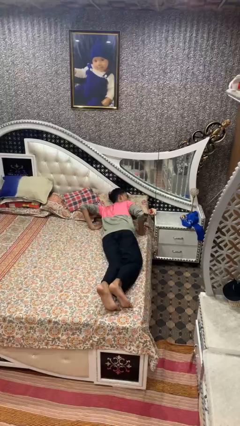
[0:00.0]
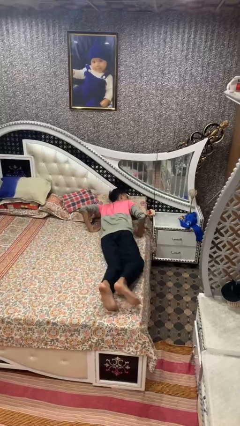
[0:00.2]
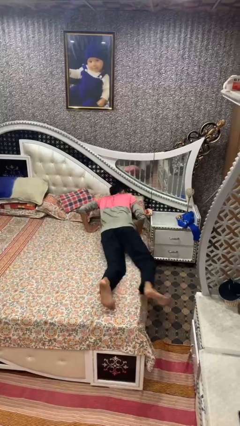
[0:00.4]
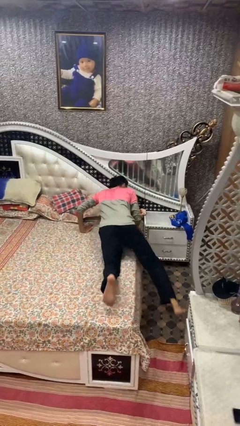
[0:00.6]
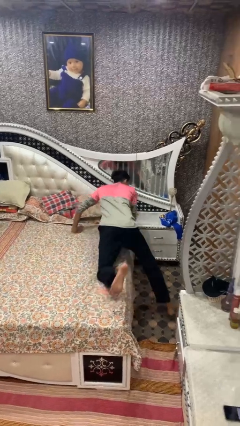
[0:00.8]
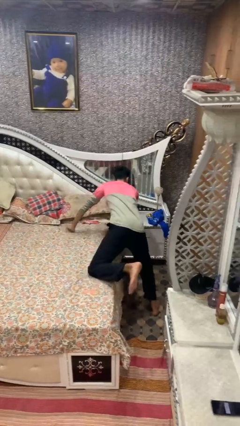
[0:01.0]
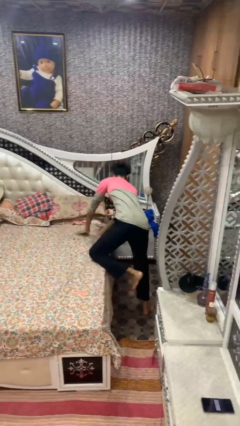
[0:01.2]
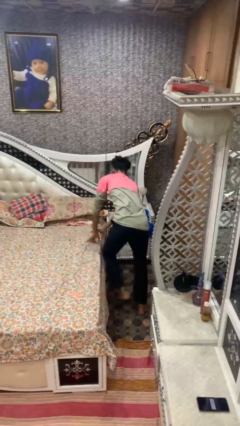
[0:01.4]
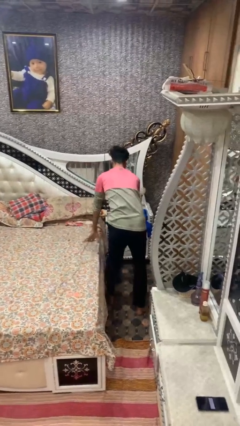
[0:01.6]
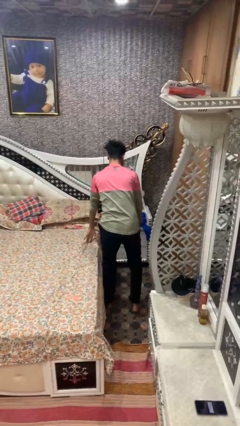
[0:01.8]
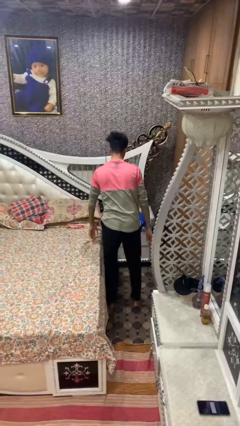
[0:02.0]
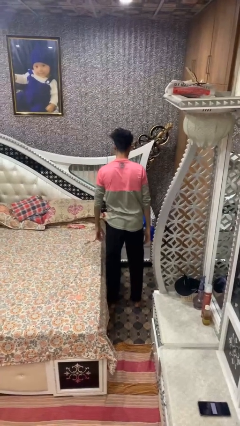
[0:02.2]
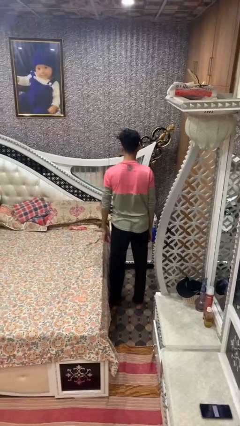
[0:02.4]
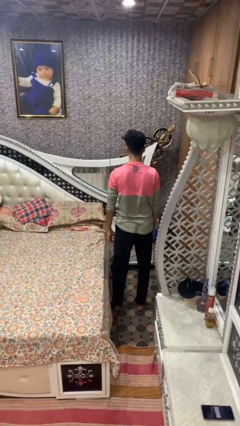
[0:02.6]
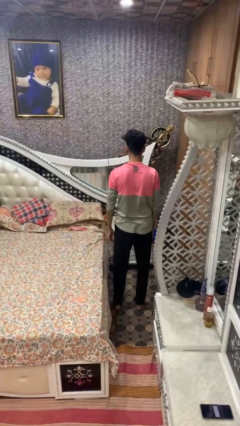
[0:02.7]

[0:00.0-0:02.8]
person stands up

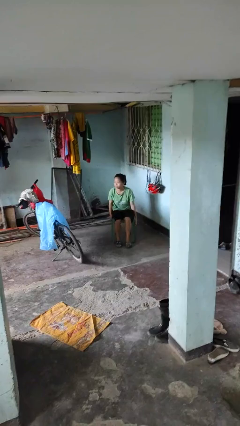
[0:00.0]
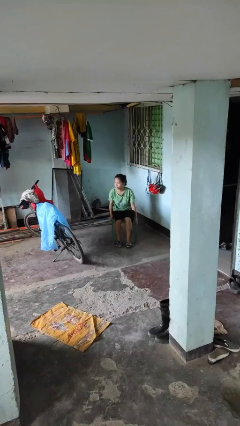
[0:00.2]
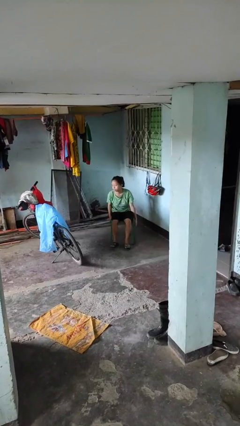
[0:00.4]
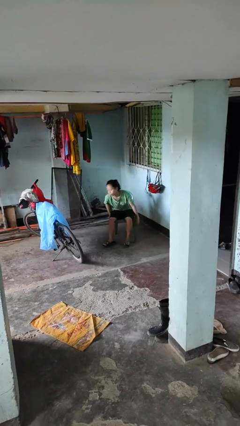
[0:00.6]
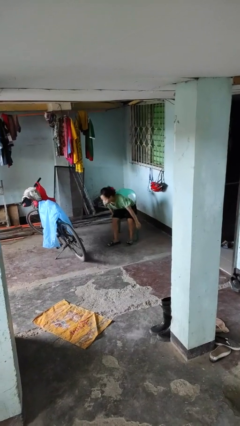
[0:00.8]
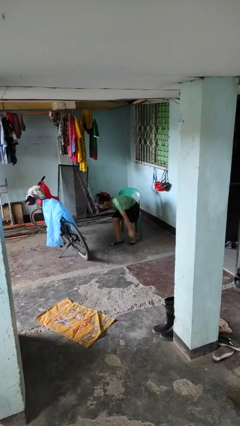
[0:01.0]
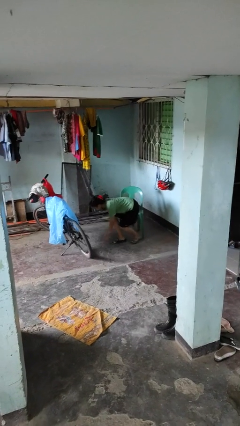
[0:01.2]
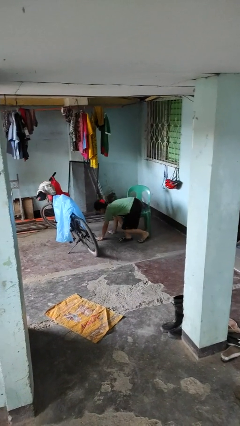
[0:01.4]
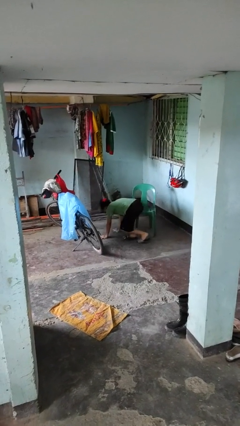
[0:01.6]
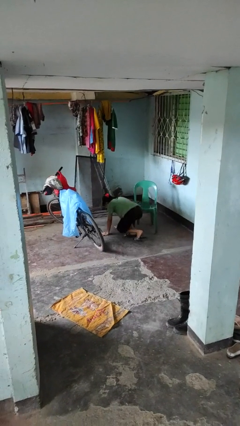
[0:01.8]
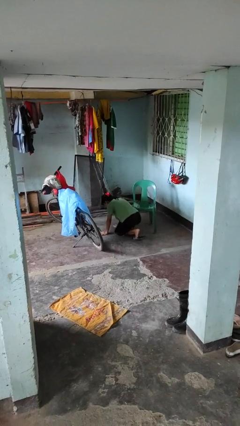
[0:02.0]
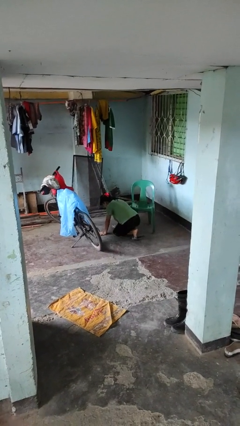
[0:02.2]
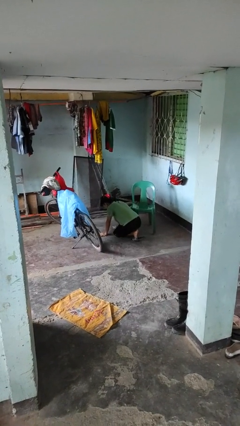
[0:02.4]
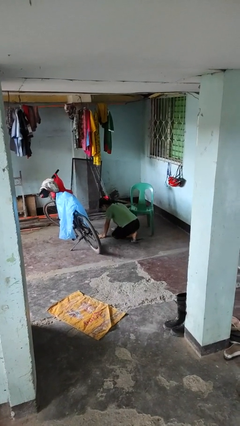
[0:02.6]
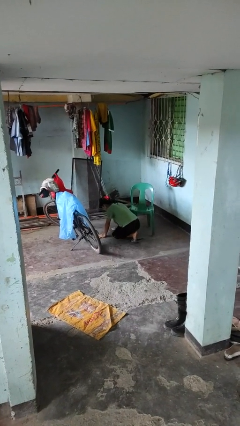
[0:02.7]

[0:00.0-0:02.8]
person falls from chair

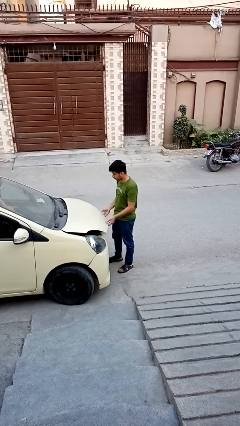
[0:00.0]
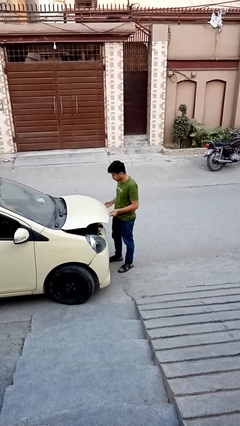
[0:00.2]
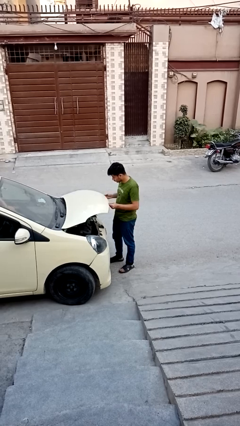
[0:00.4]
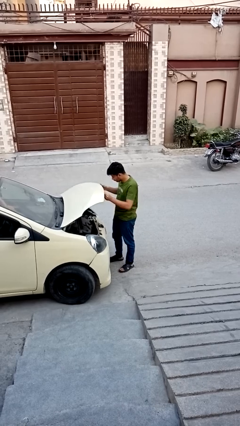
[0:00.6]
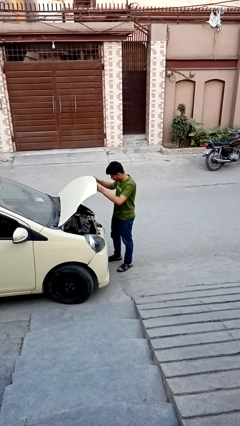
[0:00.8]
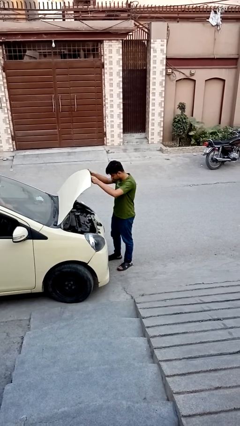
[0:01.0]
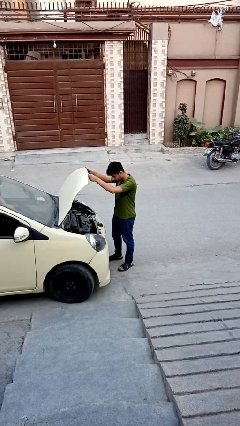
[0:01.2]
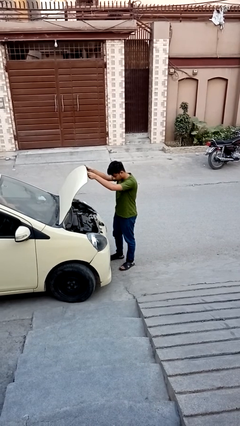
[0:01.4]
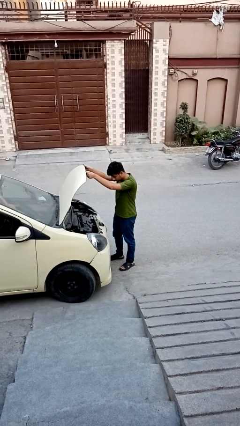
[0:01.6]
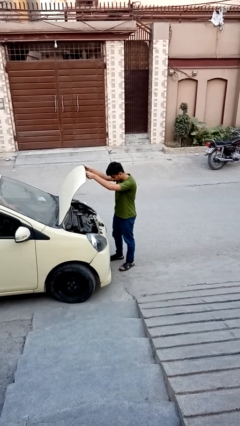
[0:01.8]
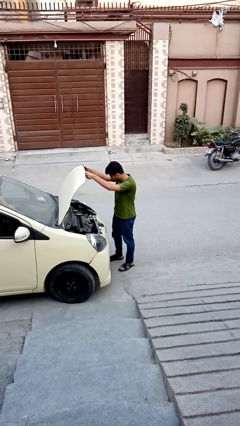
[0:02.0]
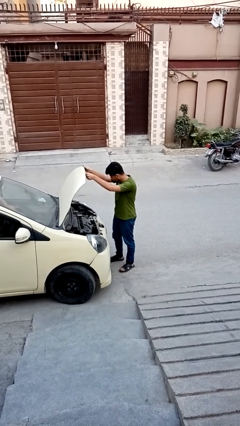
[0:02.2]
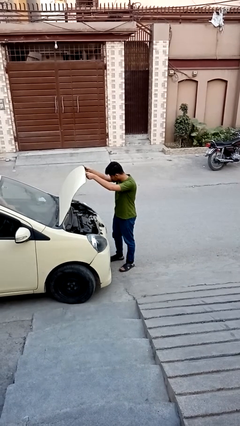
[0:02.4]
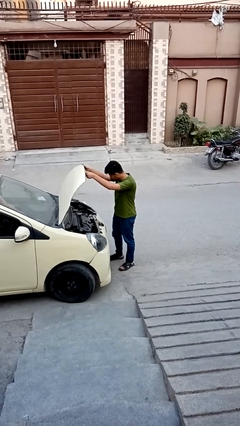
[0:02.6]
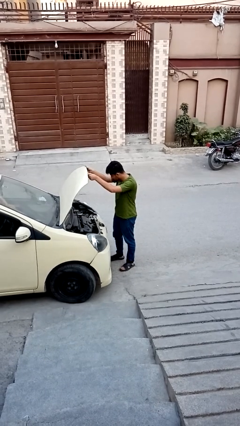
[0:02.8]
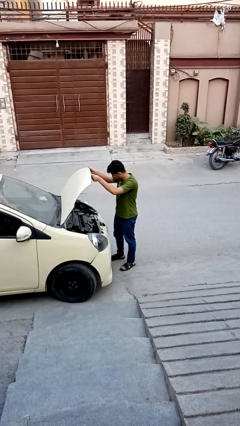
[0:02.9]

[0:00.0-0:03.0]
person opens car hood

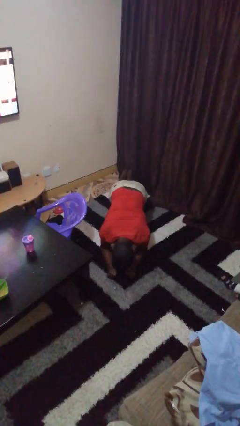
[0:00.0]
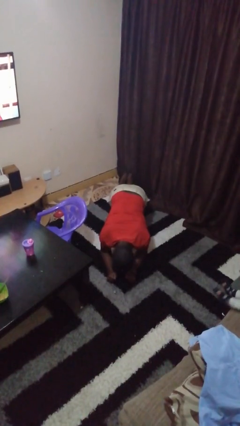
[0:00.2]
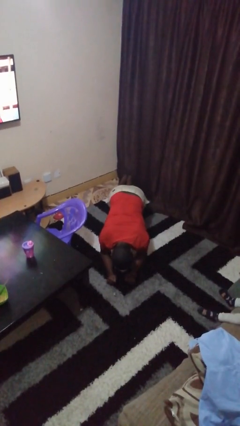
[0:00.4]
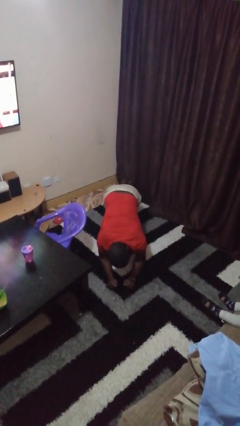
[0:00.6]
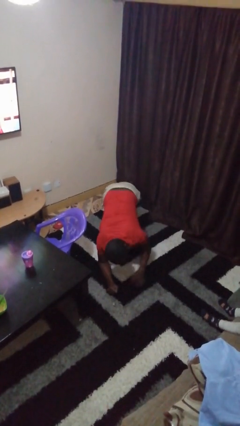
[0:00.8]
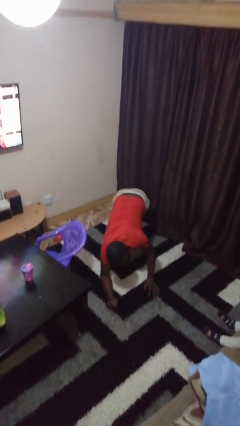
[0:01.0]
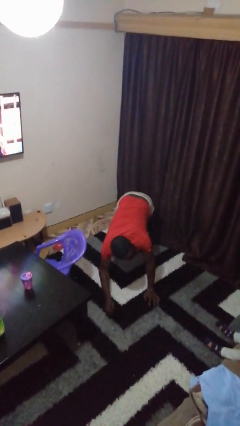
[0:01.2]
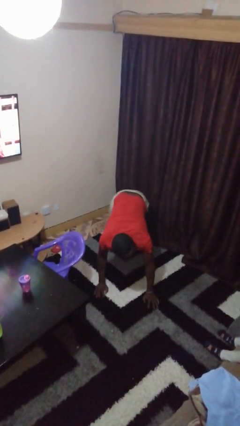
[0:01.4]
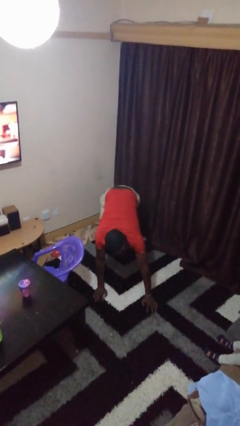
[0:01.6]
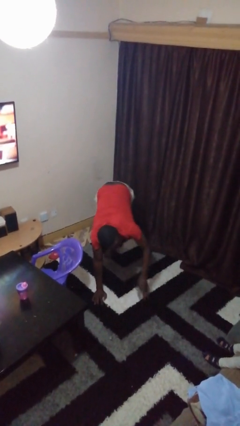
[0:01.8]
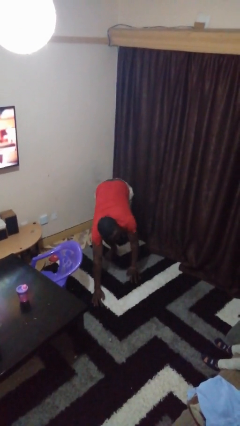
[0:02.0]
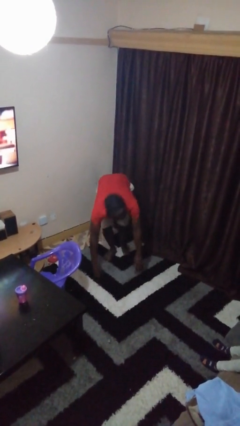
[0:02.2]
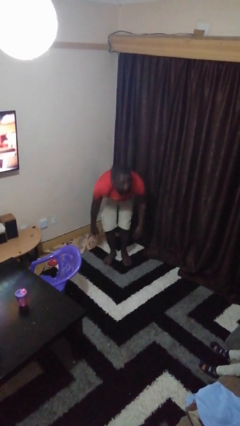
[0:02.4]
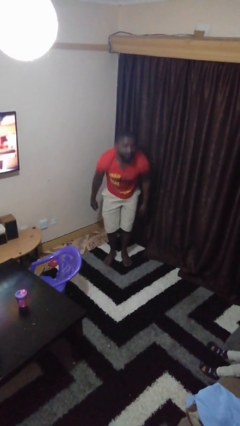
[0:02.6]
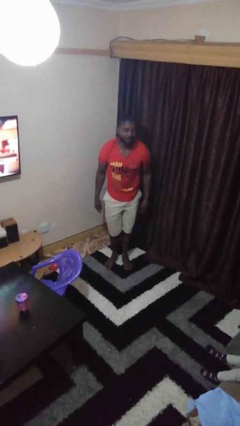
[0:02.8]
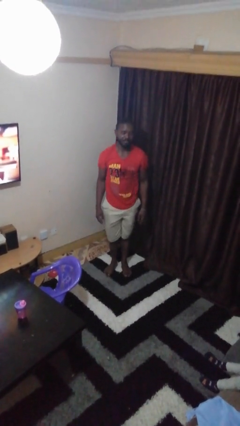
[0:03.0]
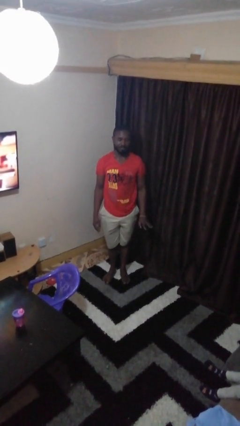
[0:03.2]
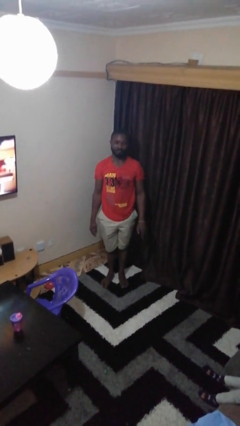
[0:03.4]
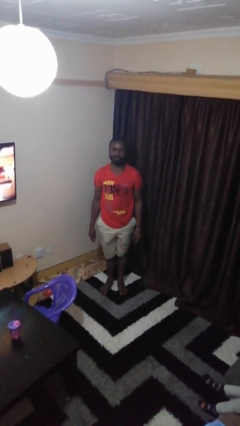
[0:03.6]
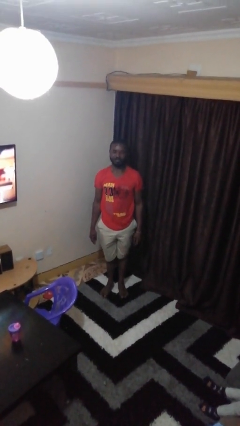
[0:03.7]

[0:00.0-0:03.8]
person stands up from floor

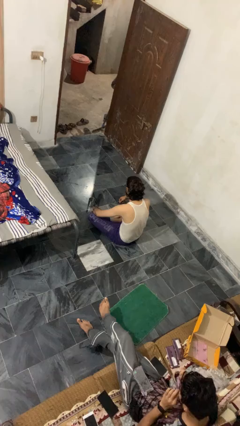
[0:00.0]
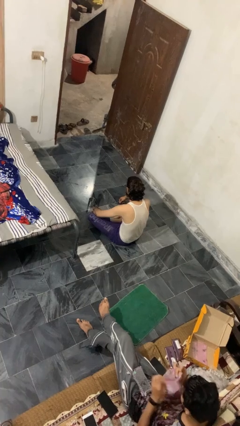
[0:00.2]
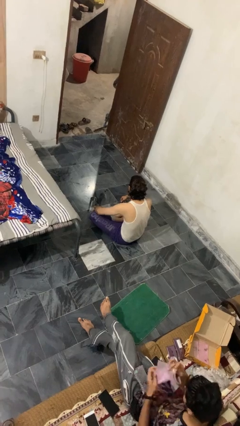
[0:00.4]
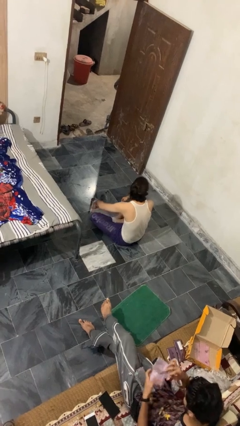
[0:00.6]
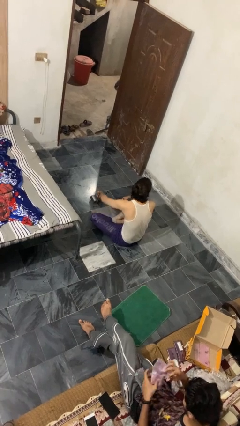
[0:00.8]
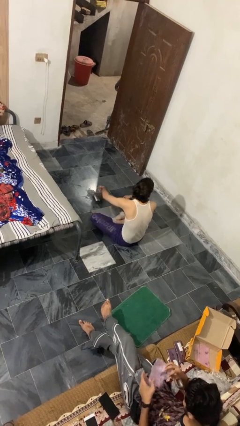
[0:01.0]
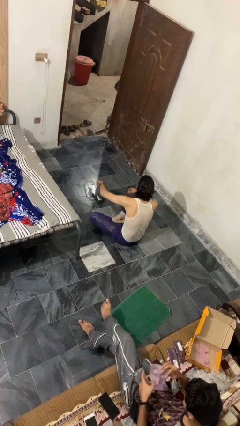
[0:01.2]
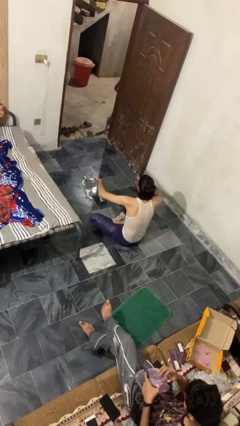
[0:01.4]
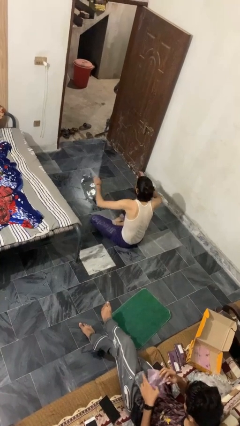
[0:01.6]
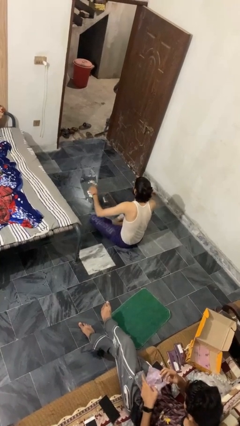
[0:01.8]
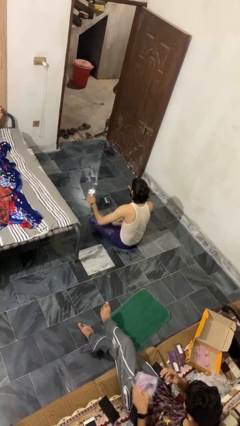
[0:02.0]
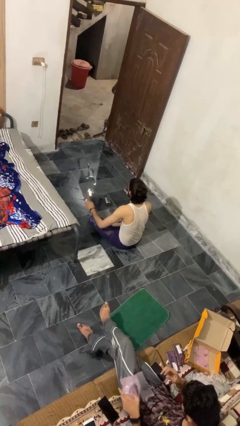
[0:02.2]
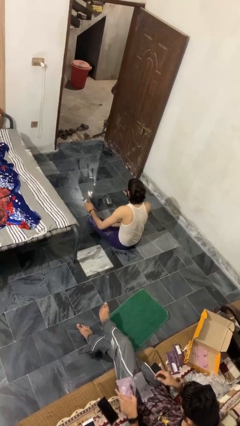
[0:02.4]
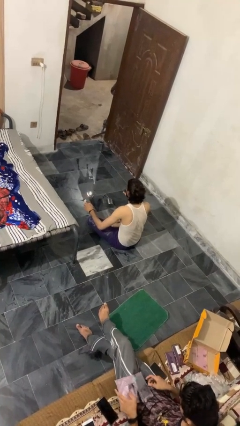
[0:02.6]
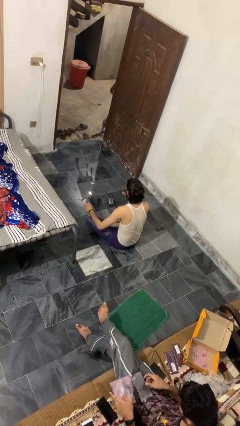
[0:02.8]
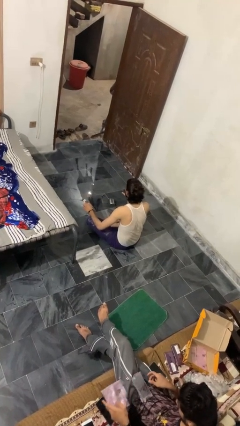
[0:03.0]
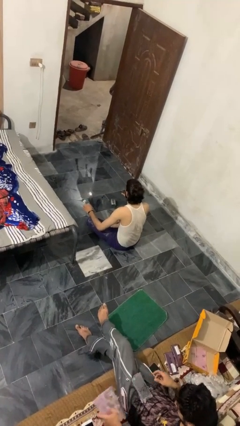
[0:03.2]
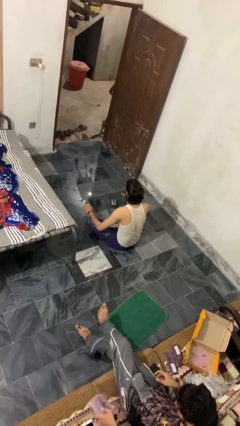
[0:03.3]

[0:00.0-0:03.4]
person spills on floor

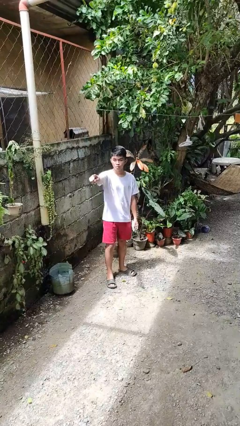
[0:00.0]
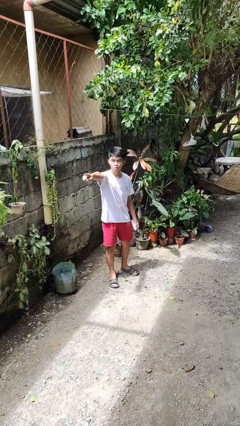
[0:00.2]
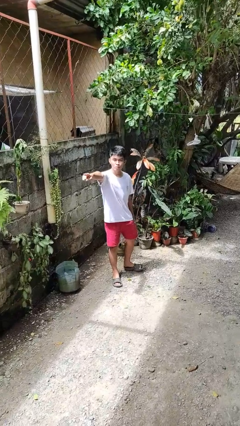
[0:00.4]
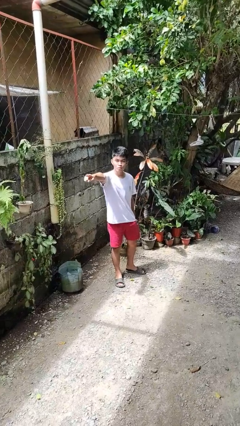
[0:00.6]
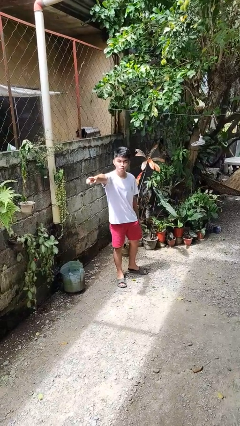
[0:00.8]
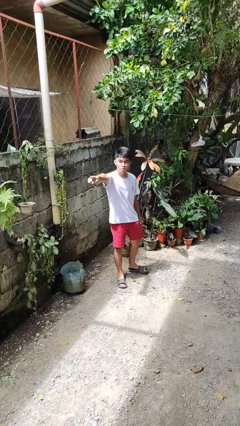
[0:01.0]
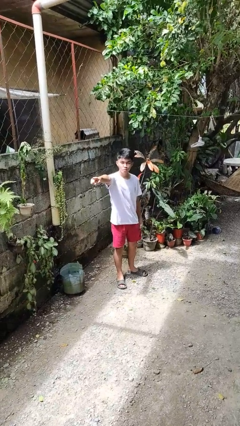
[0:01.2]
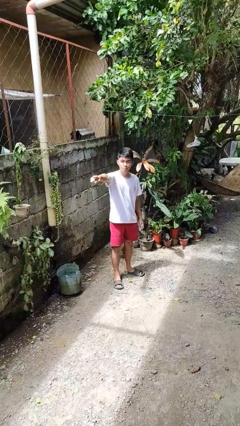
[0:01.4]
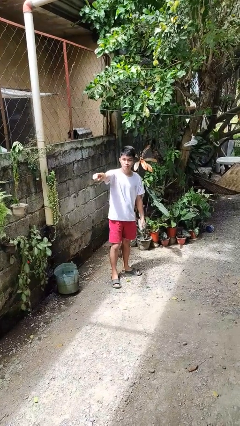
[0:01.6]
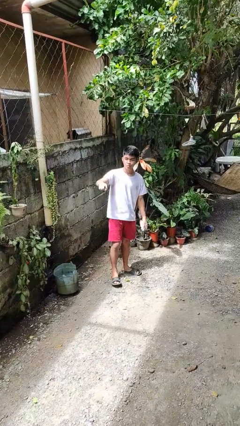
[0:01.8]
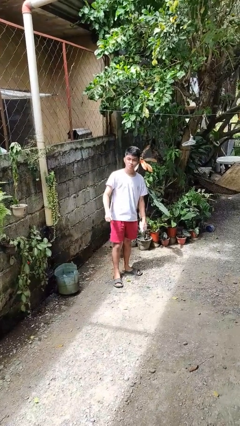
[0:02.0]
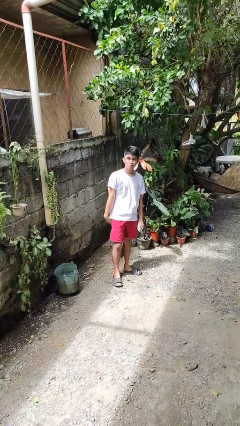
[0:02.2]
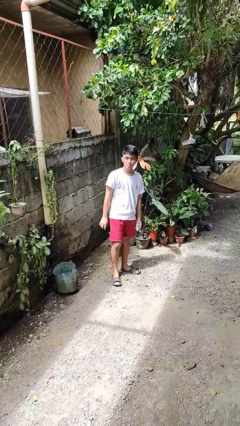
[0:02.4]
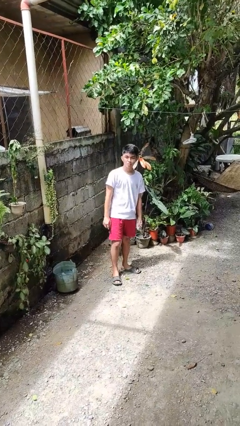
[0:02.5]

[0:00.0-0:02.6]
person points at person
